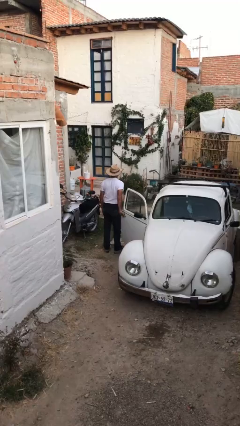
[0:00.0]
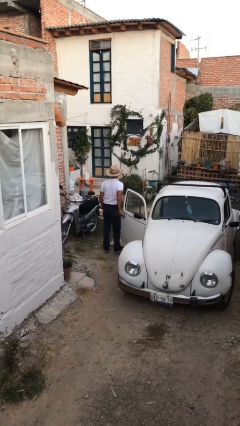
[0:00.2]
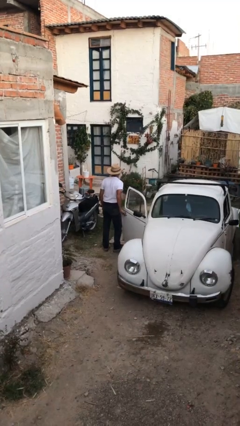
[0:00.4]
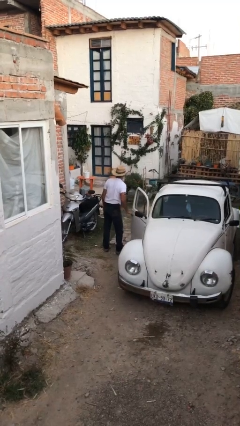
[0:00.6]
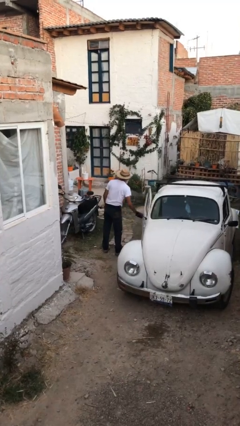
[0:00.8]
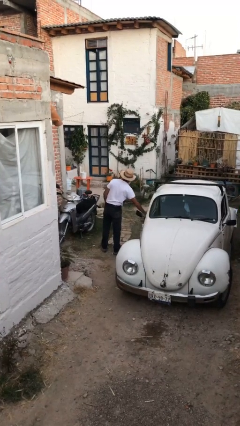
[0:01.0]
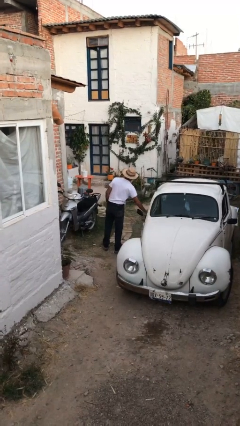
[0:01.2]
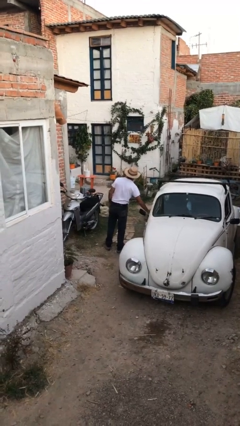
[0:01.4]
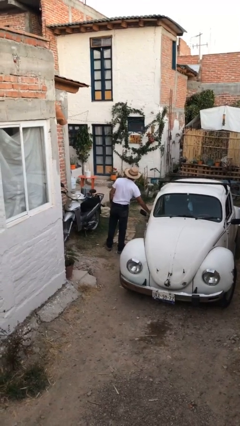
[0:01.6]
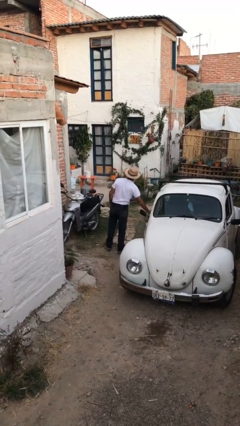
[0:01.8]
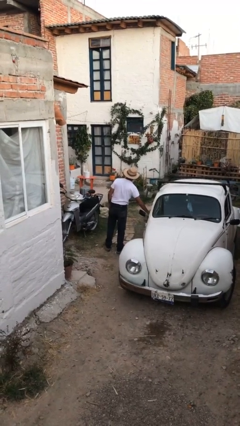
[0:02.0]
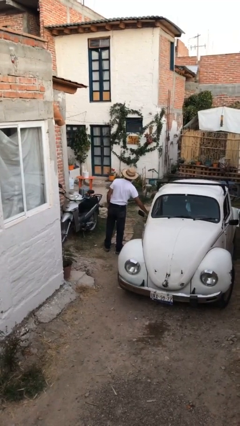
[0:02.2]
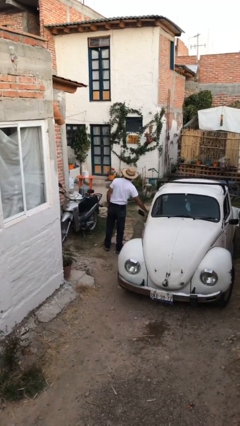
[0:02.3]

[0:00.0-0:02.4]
person closes car door

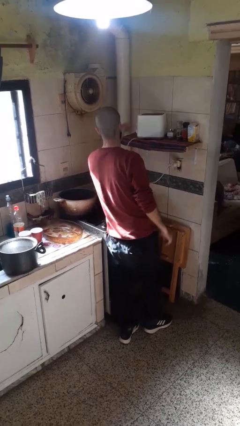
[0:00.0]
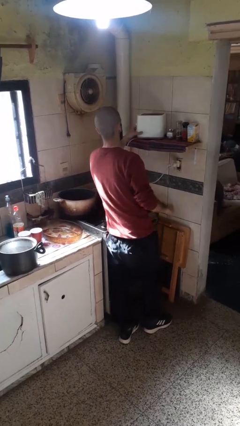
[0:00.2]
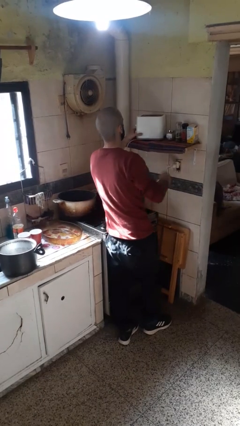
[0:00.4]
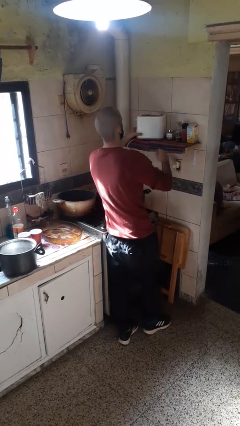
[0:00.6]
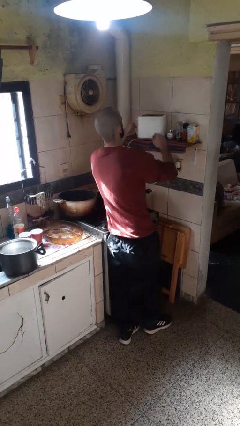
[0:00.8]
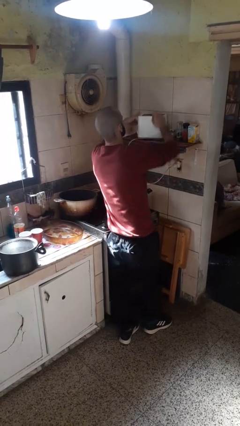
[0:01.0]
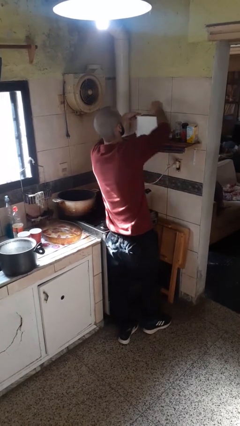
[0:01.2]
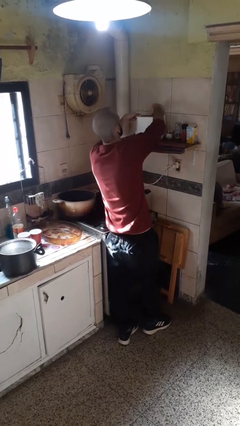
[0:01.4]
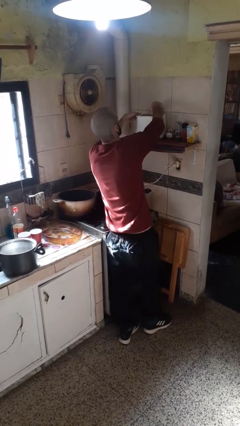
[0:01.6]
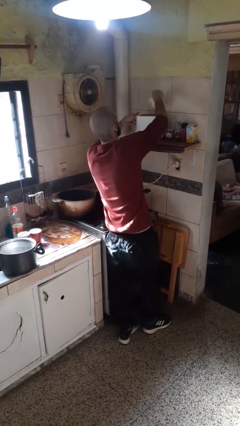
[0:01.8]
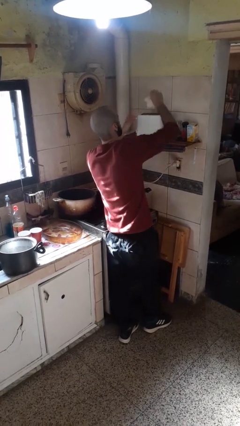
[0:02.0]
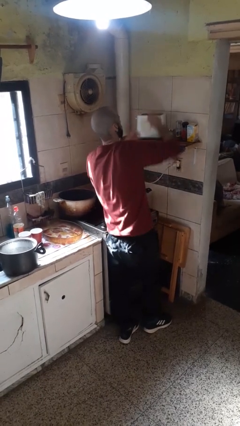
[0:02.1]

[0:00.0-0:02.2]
person takes object from toaster

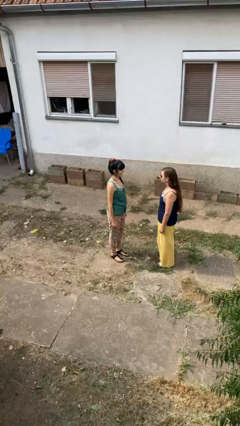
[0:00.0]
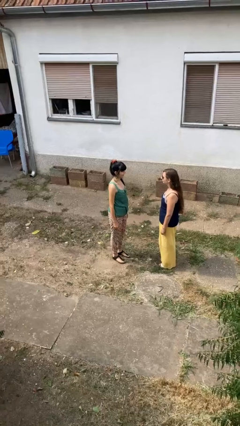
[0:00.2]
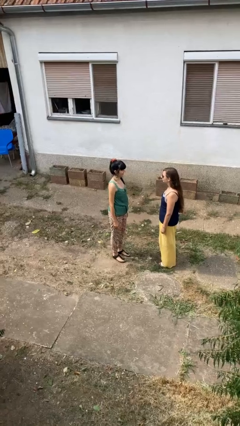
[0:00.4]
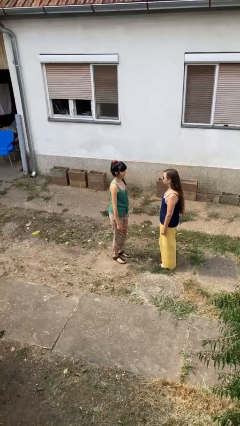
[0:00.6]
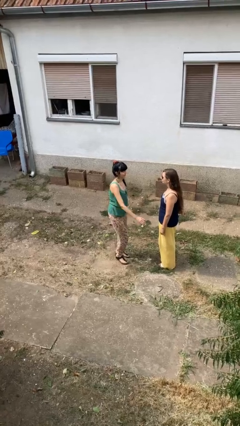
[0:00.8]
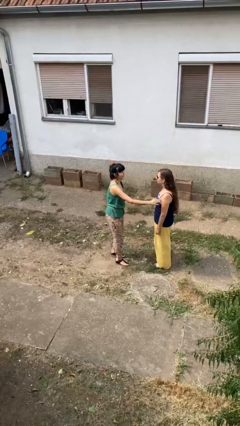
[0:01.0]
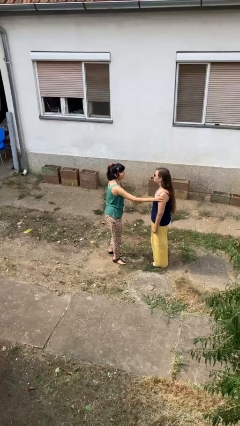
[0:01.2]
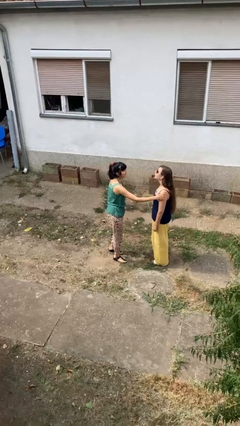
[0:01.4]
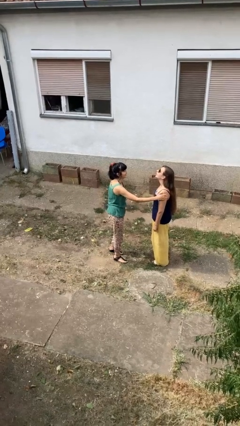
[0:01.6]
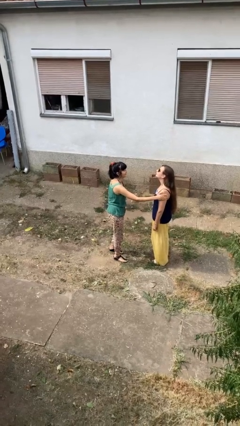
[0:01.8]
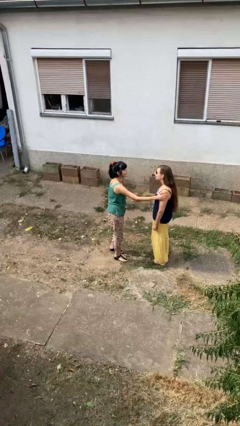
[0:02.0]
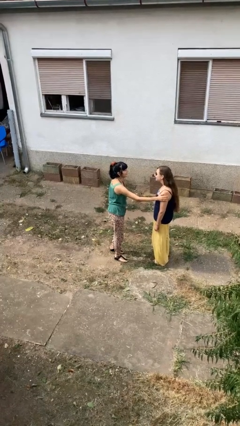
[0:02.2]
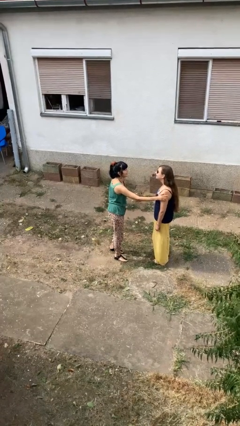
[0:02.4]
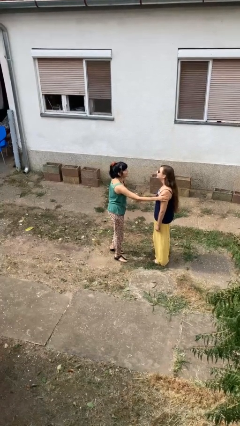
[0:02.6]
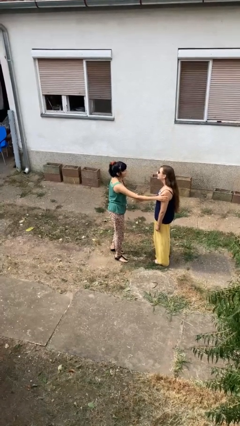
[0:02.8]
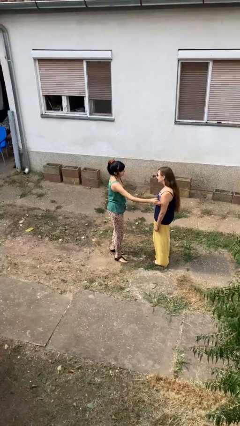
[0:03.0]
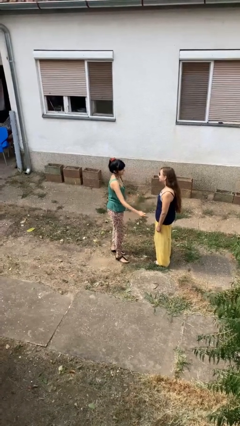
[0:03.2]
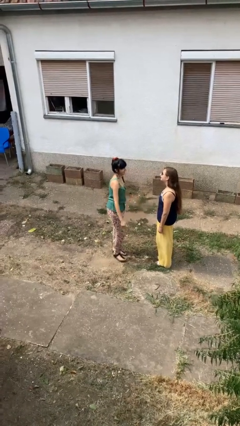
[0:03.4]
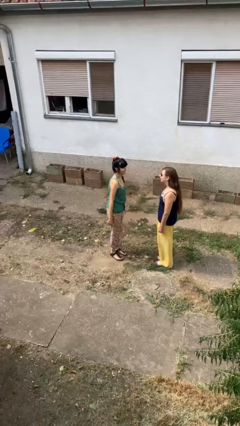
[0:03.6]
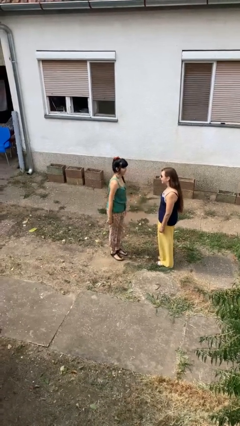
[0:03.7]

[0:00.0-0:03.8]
person pounds shoulders of person

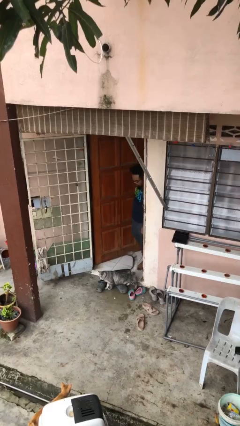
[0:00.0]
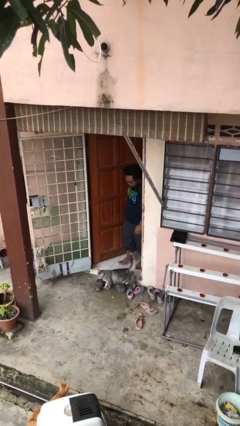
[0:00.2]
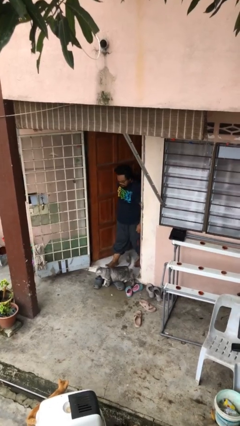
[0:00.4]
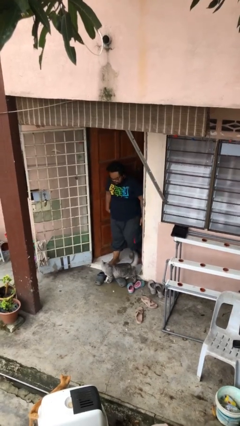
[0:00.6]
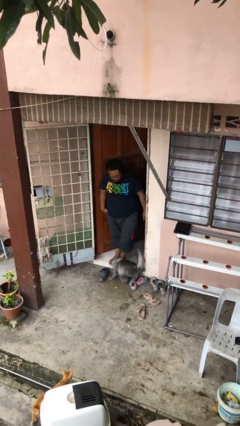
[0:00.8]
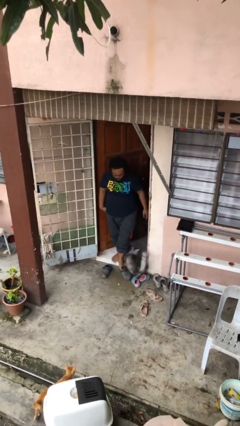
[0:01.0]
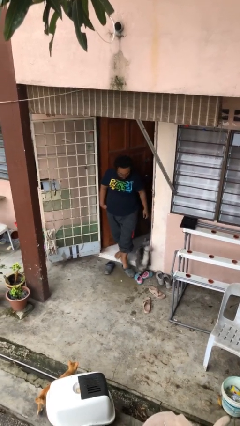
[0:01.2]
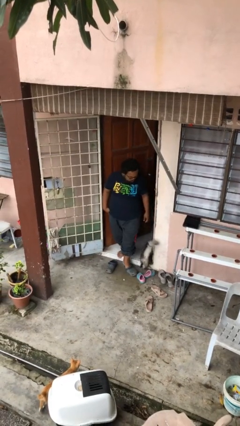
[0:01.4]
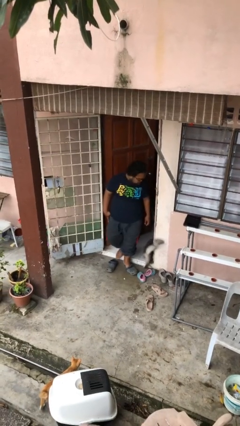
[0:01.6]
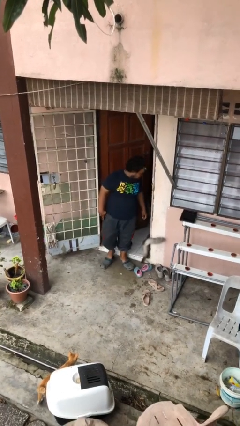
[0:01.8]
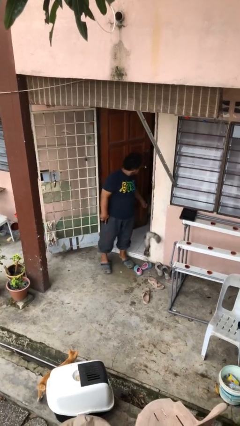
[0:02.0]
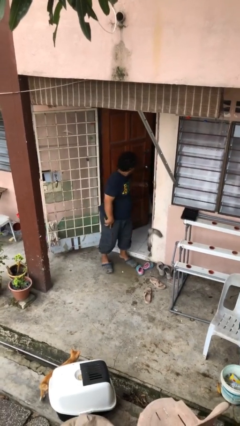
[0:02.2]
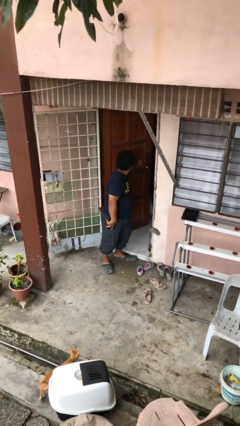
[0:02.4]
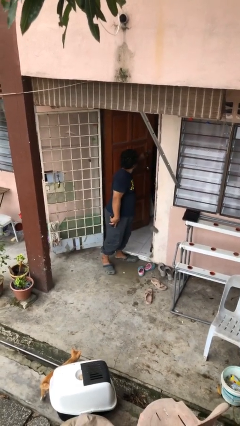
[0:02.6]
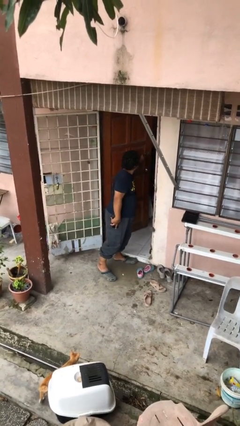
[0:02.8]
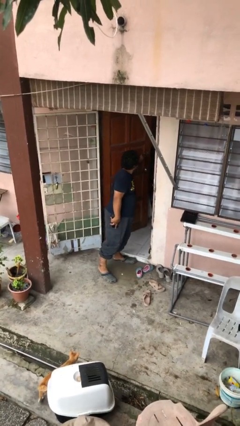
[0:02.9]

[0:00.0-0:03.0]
person enters scene through structure

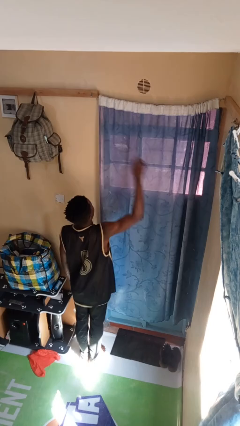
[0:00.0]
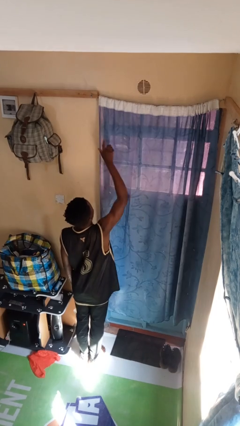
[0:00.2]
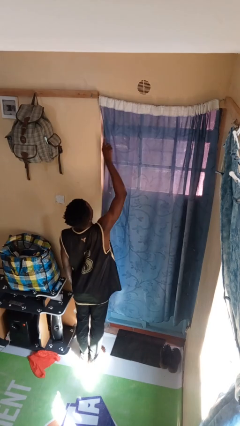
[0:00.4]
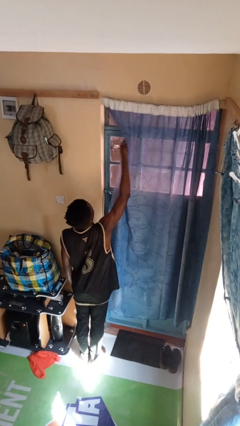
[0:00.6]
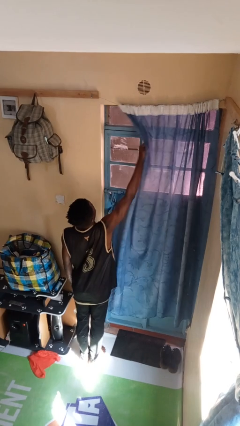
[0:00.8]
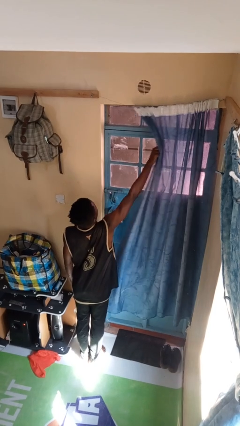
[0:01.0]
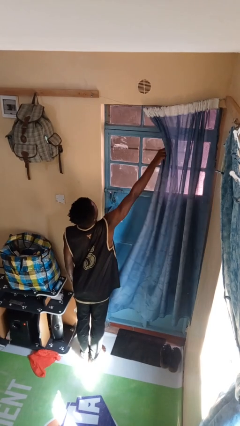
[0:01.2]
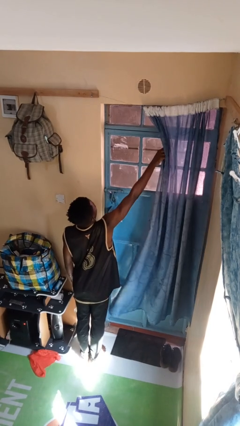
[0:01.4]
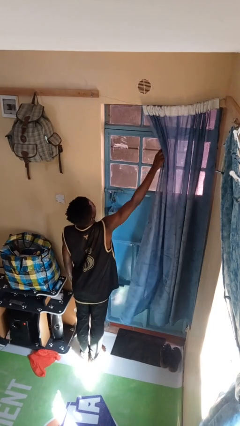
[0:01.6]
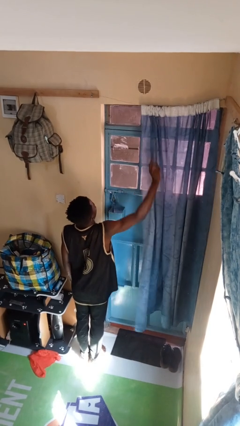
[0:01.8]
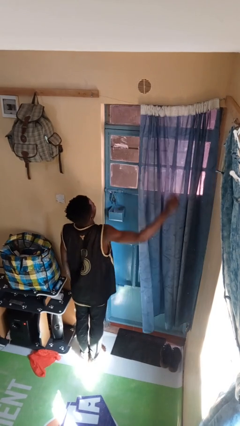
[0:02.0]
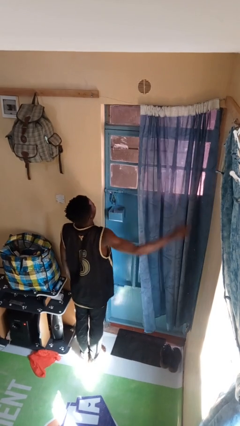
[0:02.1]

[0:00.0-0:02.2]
person opens curtains

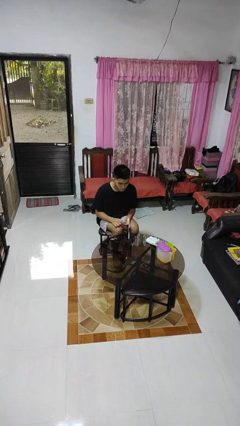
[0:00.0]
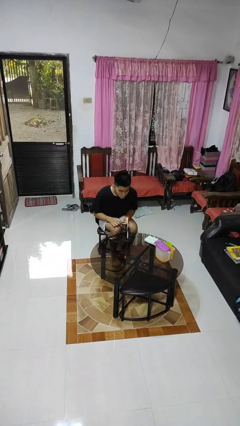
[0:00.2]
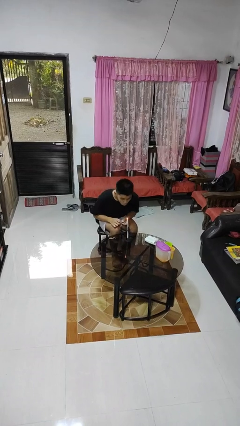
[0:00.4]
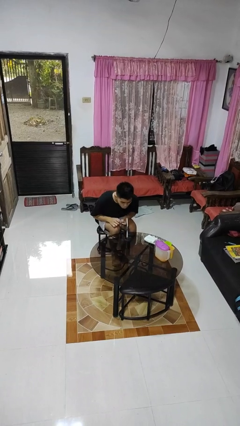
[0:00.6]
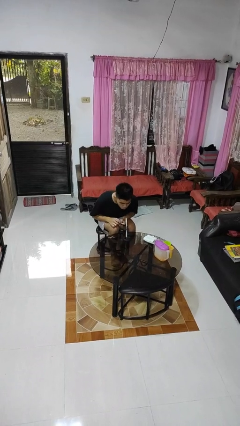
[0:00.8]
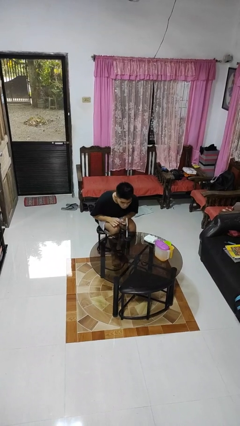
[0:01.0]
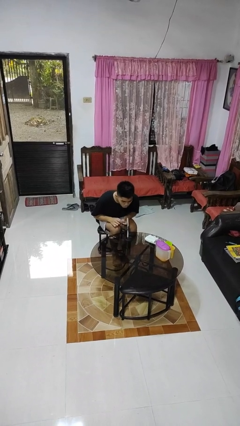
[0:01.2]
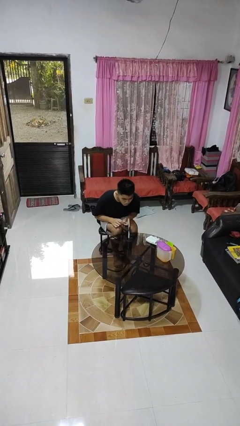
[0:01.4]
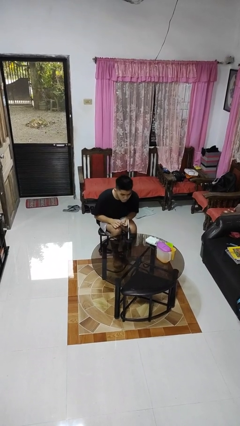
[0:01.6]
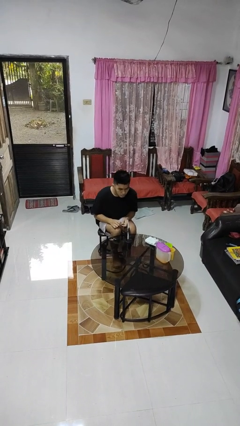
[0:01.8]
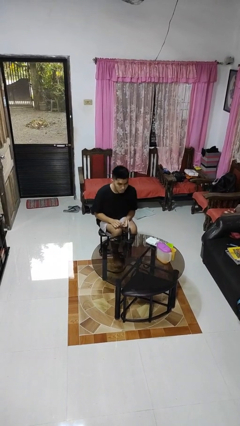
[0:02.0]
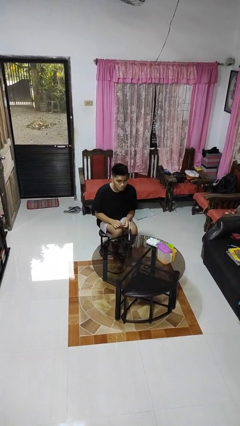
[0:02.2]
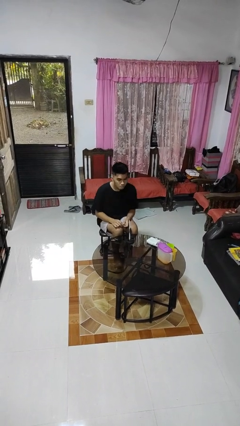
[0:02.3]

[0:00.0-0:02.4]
person extinguishes candle

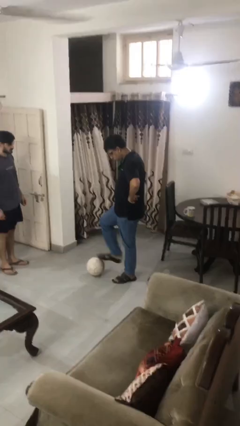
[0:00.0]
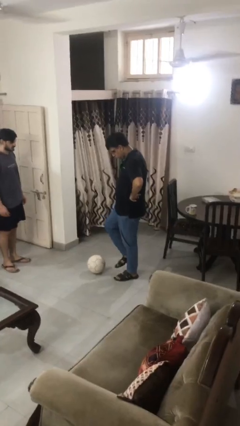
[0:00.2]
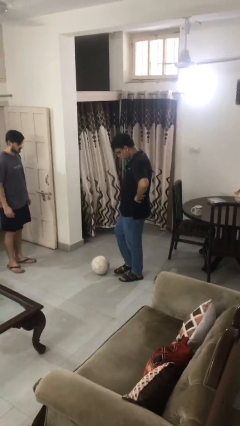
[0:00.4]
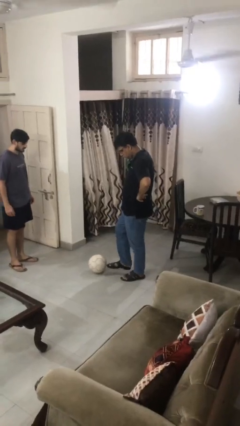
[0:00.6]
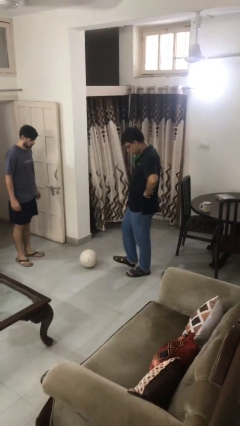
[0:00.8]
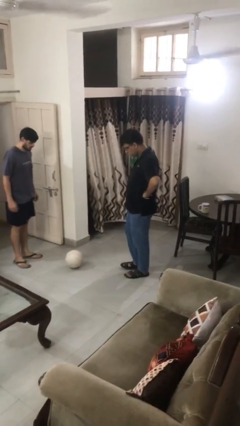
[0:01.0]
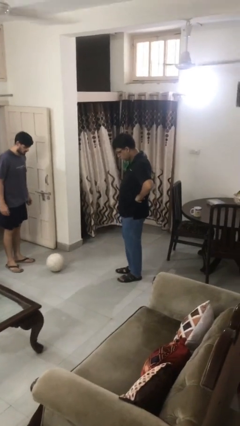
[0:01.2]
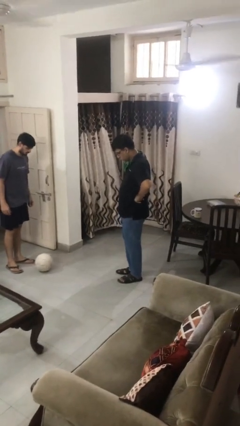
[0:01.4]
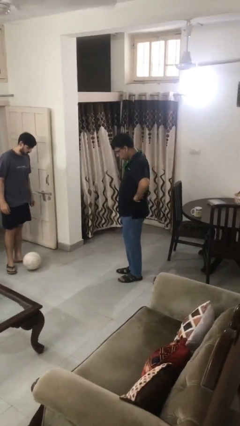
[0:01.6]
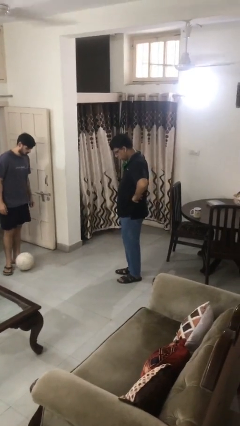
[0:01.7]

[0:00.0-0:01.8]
person kicks object to person
